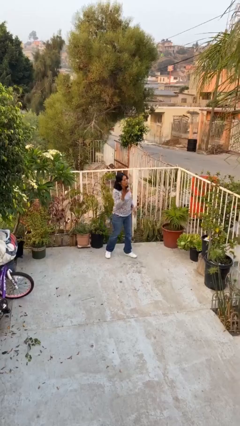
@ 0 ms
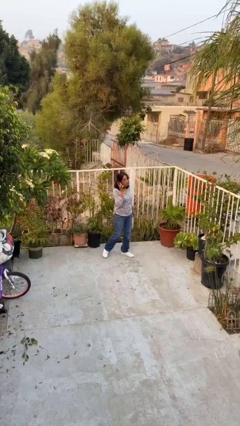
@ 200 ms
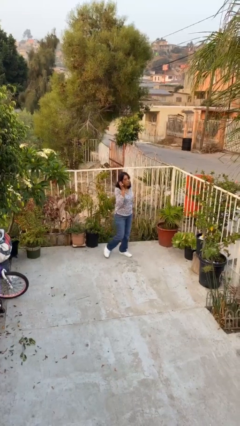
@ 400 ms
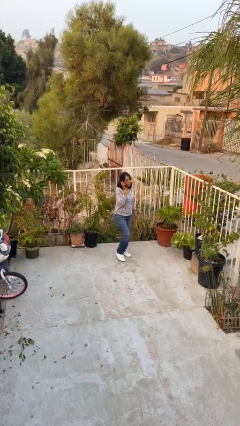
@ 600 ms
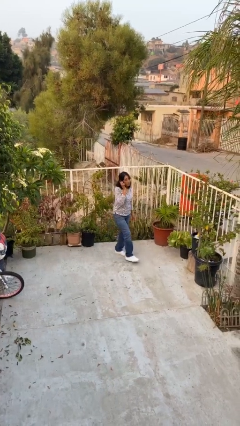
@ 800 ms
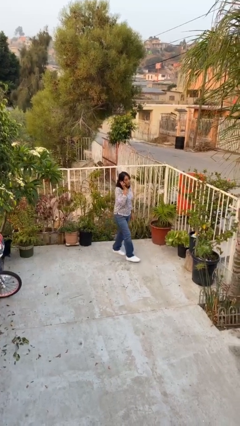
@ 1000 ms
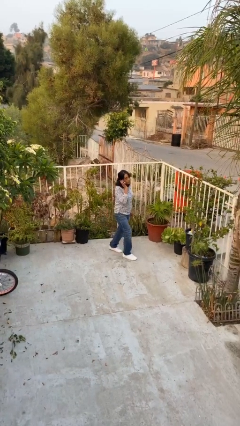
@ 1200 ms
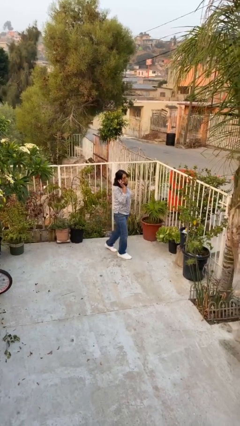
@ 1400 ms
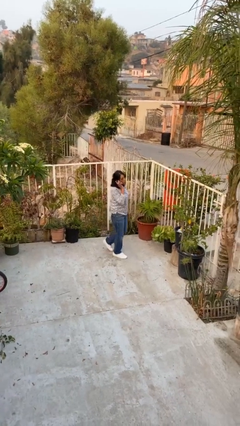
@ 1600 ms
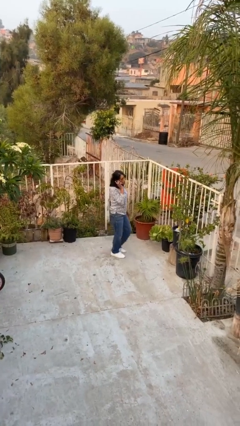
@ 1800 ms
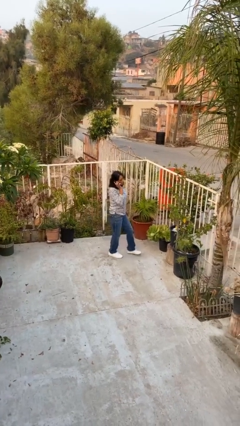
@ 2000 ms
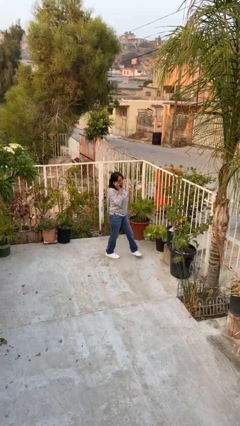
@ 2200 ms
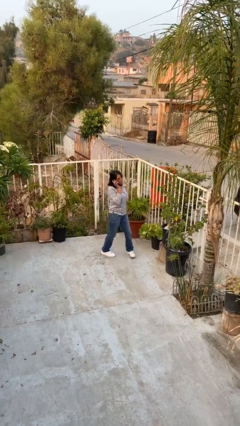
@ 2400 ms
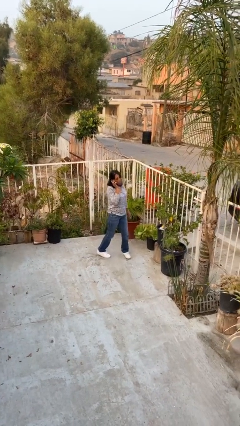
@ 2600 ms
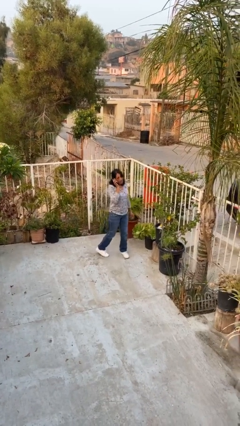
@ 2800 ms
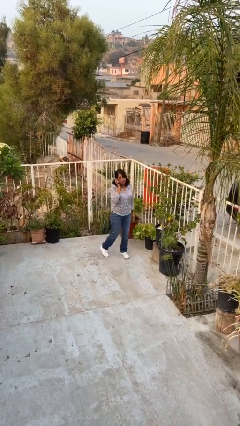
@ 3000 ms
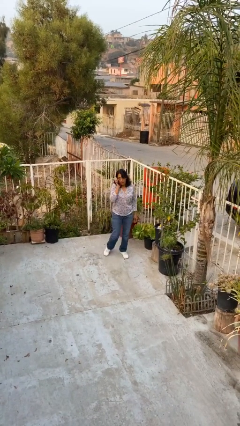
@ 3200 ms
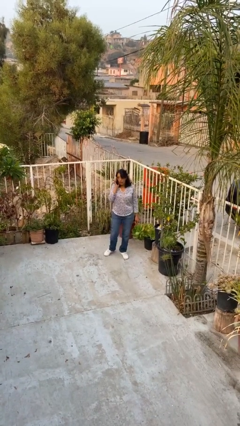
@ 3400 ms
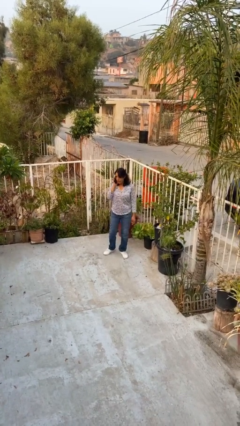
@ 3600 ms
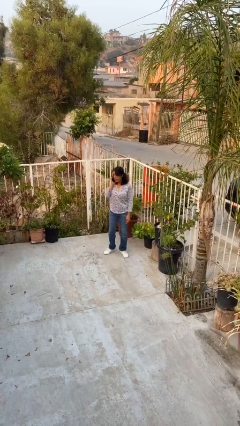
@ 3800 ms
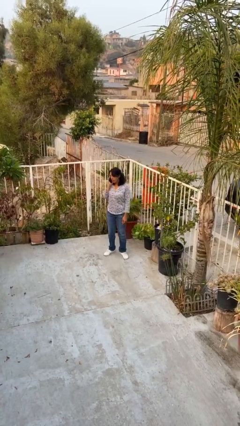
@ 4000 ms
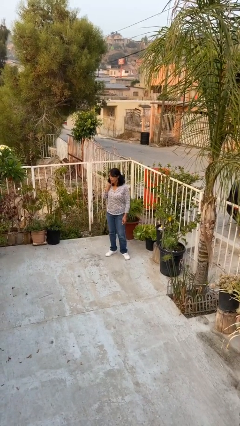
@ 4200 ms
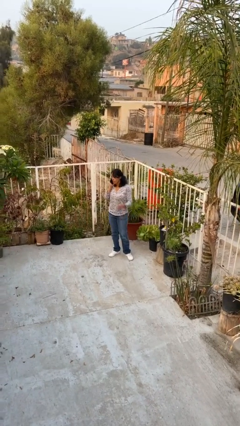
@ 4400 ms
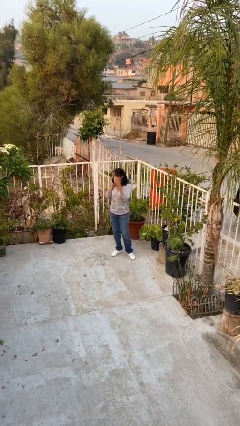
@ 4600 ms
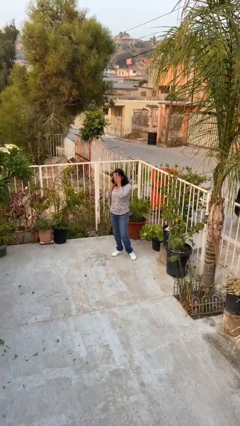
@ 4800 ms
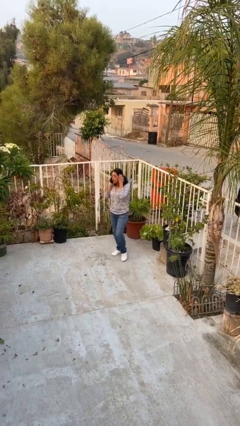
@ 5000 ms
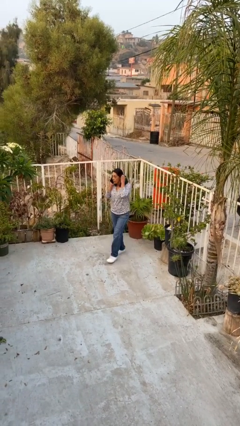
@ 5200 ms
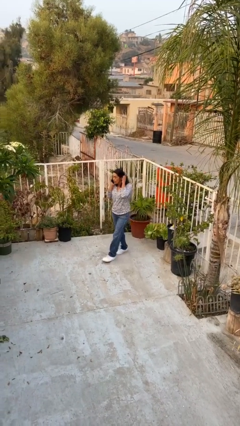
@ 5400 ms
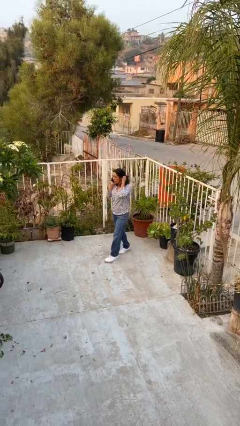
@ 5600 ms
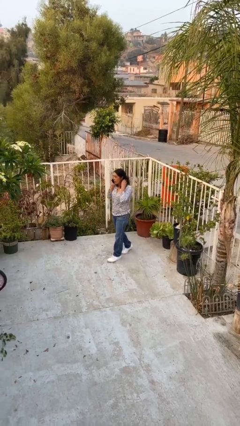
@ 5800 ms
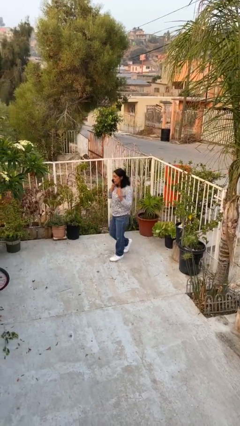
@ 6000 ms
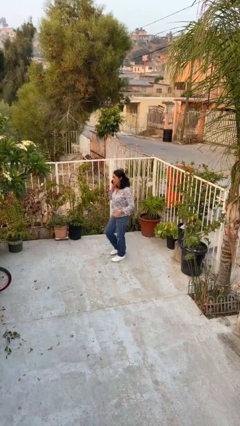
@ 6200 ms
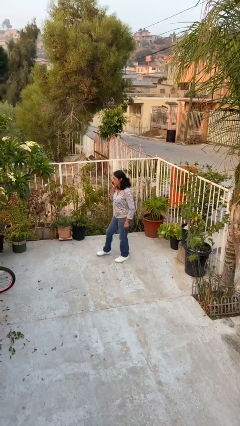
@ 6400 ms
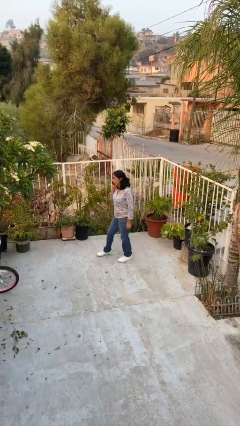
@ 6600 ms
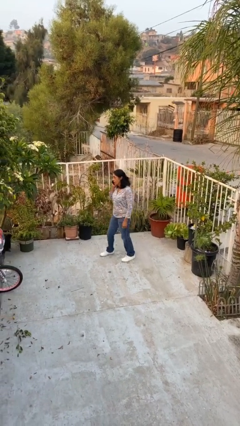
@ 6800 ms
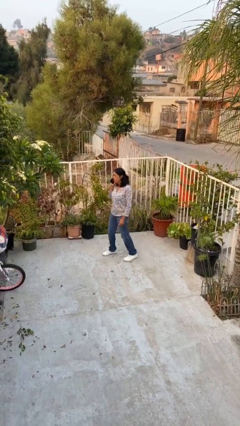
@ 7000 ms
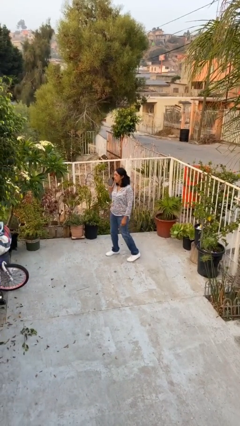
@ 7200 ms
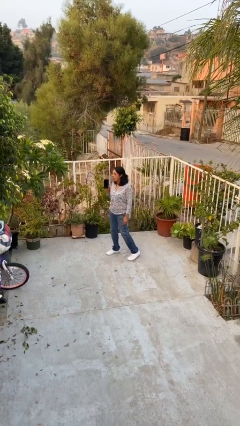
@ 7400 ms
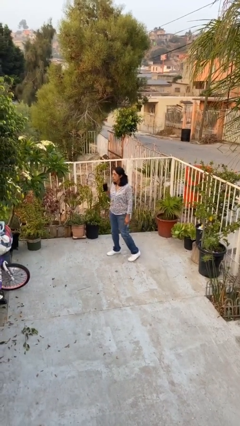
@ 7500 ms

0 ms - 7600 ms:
person talks on phone

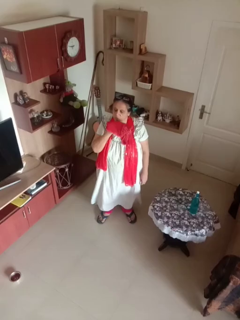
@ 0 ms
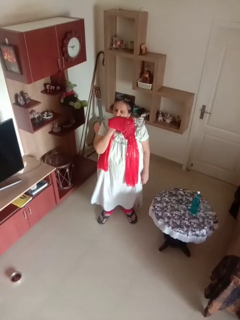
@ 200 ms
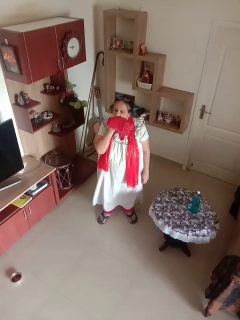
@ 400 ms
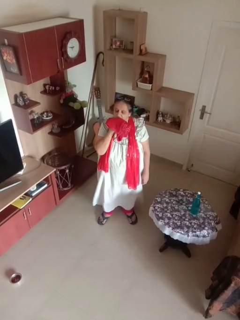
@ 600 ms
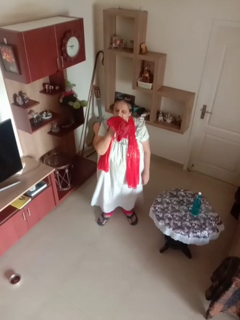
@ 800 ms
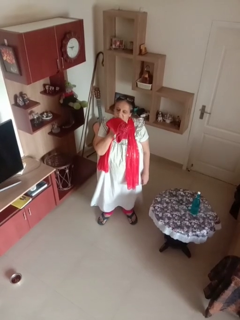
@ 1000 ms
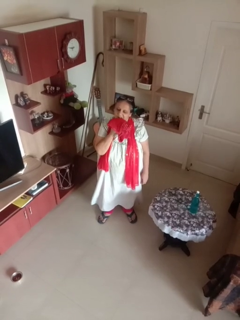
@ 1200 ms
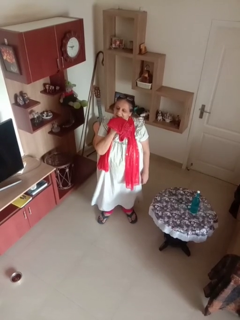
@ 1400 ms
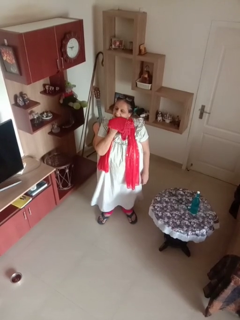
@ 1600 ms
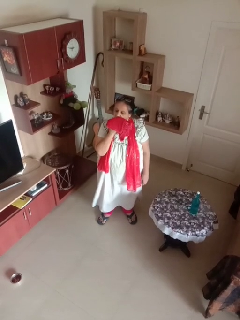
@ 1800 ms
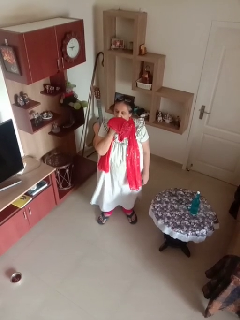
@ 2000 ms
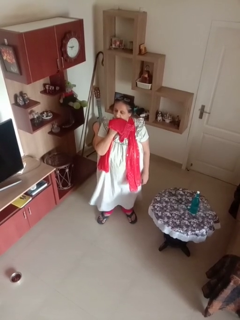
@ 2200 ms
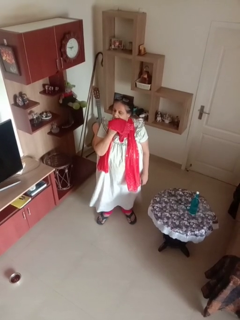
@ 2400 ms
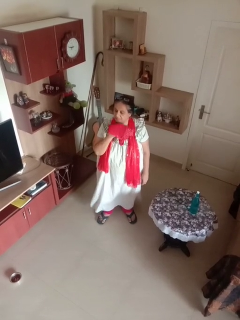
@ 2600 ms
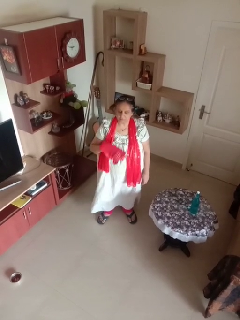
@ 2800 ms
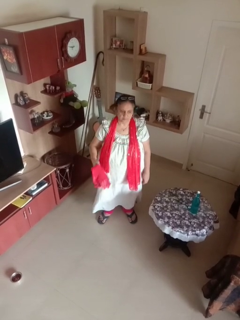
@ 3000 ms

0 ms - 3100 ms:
person wipes mouth with napkin

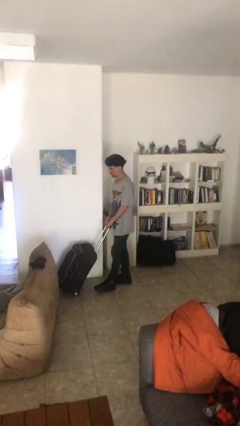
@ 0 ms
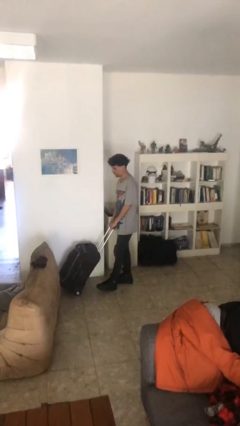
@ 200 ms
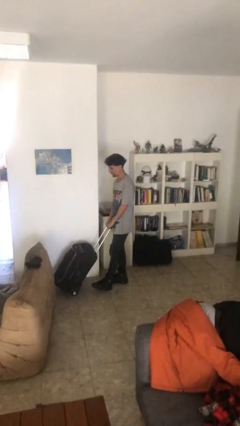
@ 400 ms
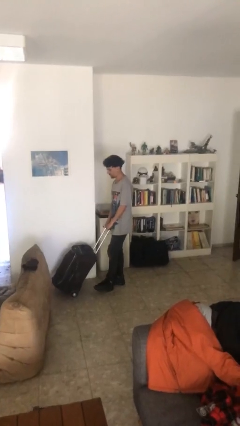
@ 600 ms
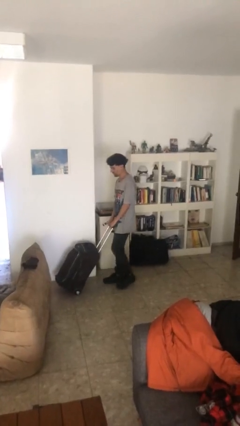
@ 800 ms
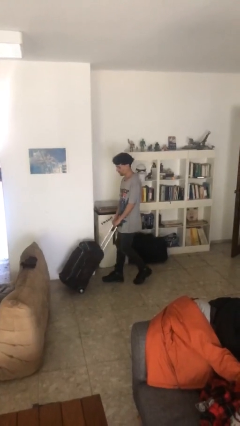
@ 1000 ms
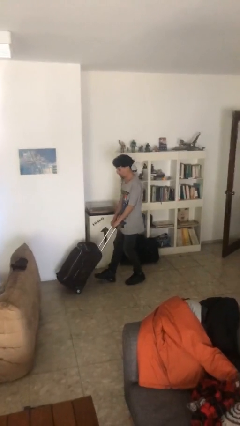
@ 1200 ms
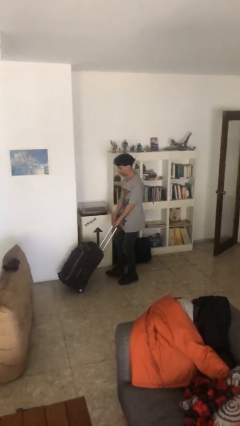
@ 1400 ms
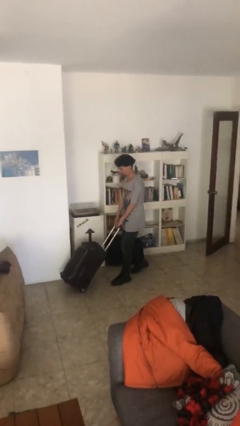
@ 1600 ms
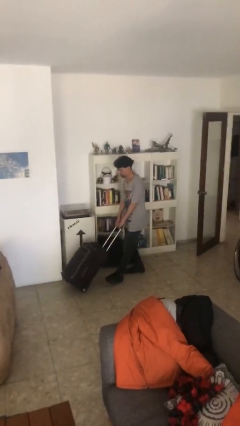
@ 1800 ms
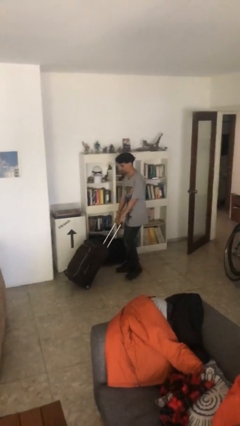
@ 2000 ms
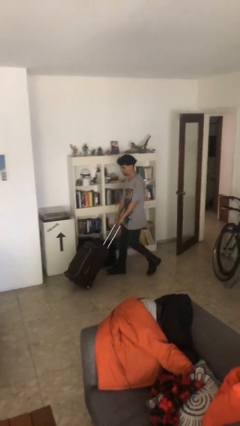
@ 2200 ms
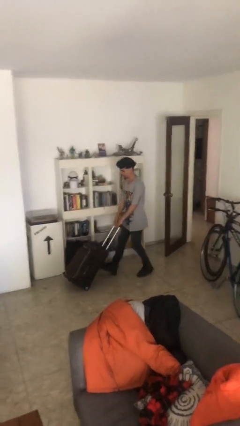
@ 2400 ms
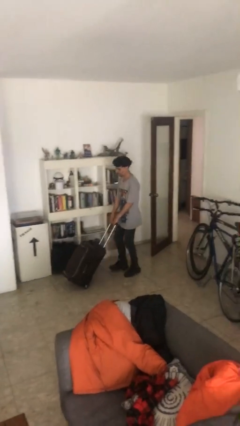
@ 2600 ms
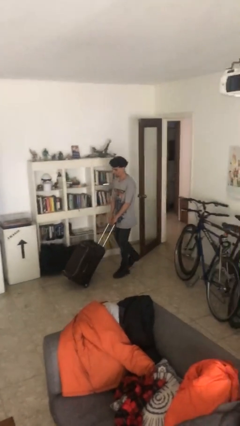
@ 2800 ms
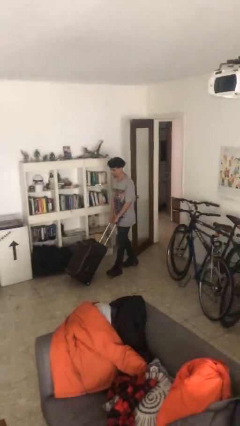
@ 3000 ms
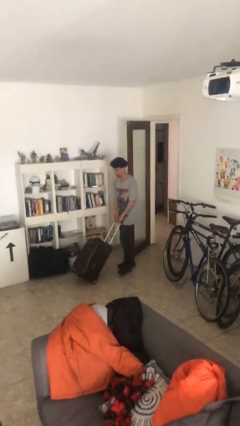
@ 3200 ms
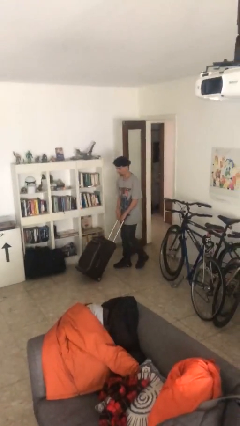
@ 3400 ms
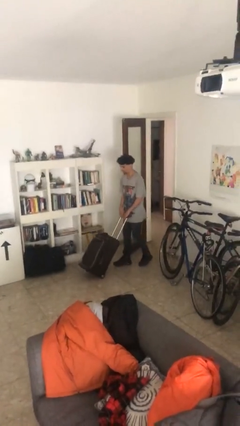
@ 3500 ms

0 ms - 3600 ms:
person pulls wheeled cart

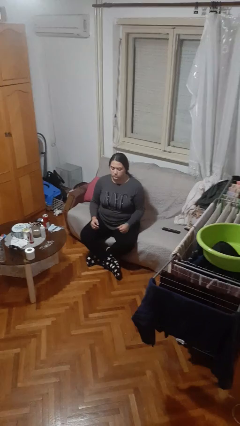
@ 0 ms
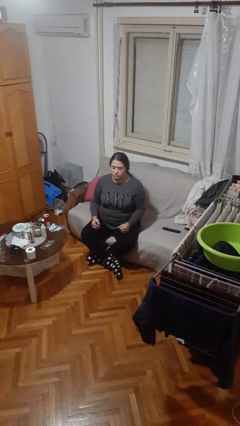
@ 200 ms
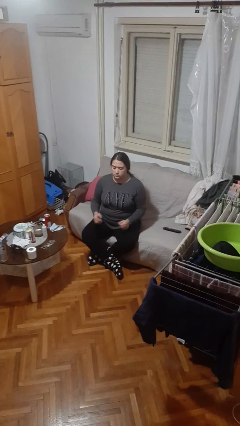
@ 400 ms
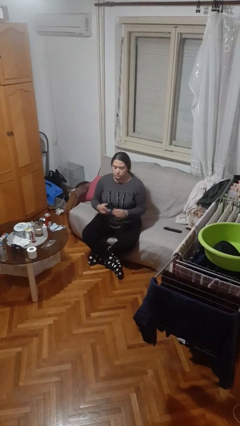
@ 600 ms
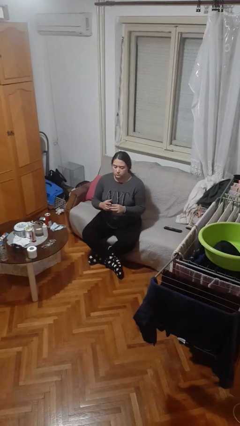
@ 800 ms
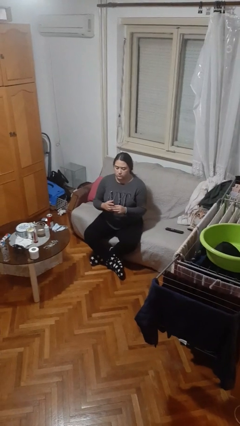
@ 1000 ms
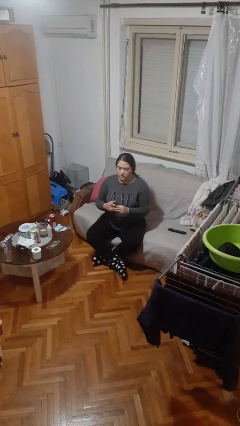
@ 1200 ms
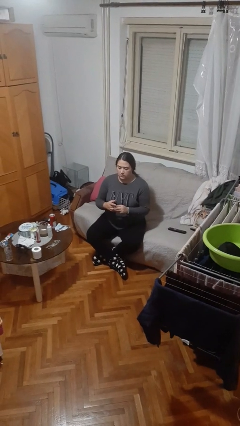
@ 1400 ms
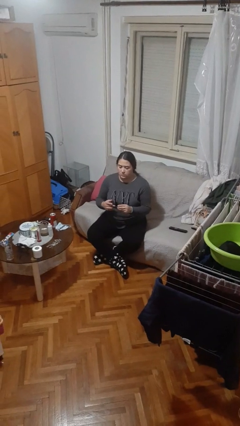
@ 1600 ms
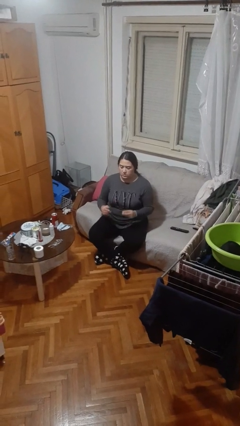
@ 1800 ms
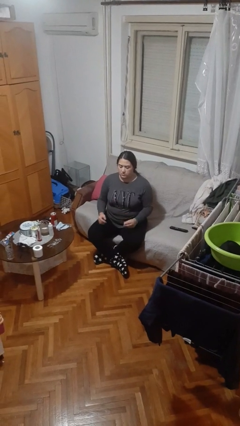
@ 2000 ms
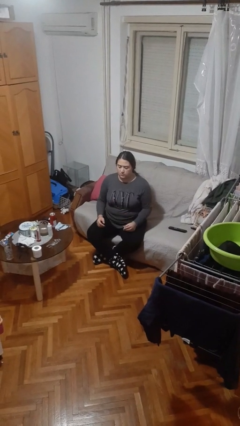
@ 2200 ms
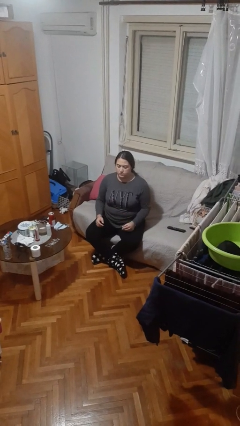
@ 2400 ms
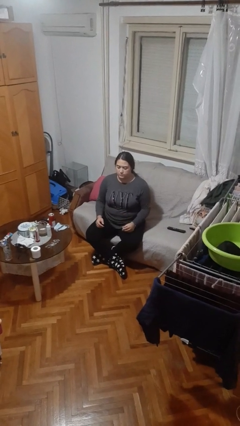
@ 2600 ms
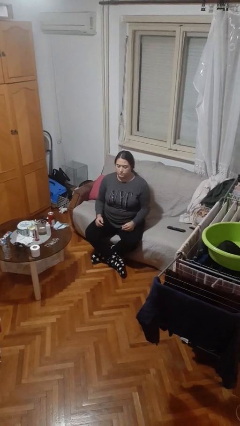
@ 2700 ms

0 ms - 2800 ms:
person takes off ring

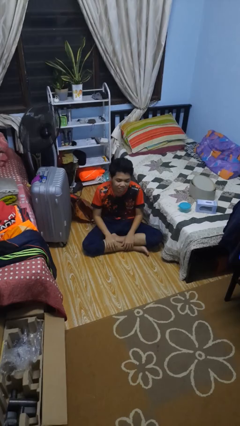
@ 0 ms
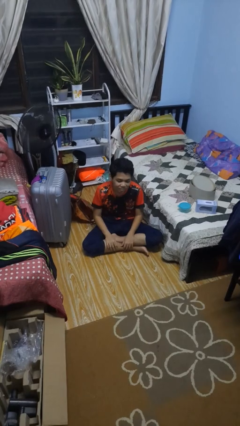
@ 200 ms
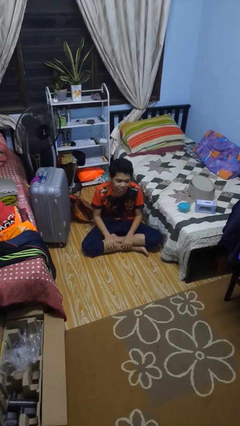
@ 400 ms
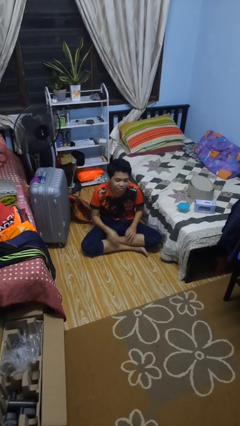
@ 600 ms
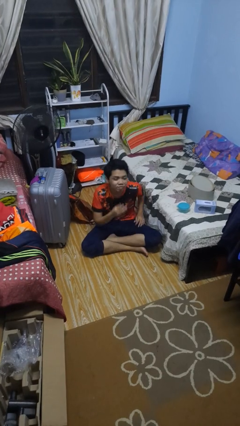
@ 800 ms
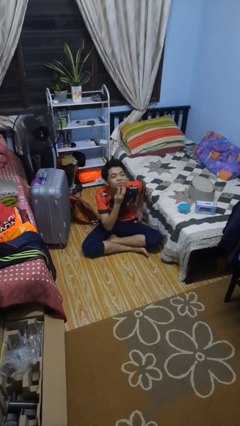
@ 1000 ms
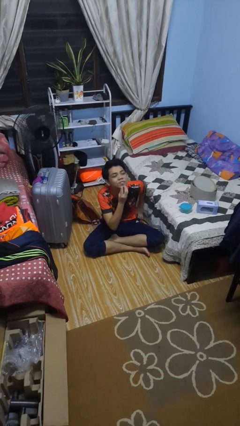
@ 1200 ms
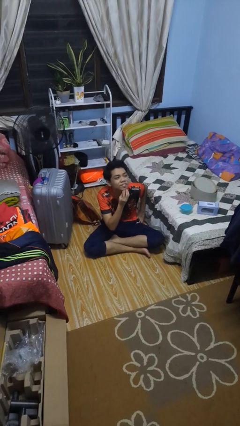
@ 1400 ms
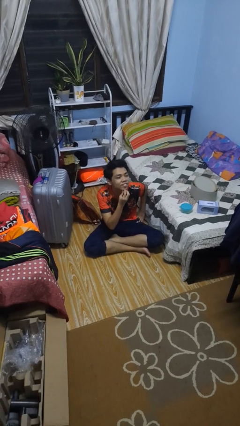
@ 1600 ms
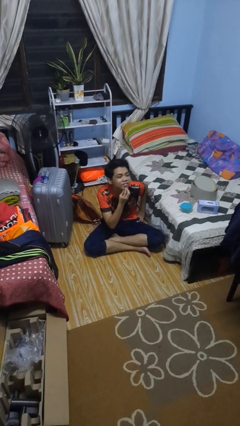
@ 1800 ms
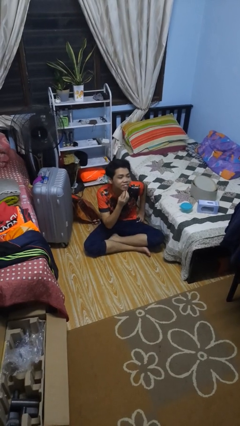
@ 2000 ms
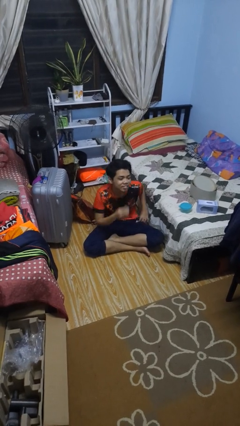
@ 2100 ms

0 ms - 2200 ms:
person strokes chin
